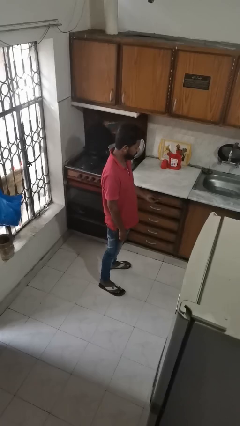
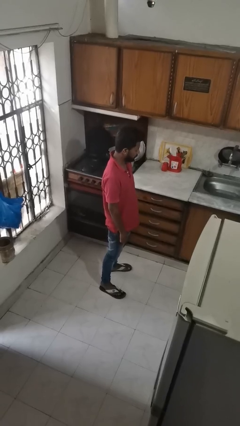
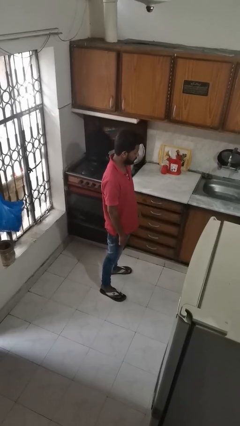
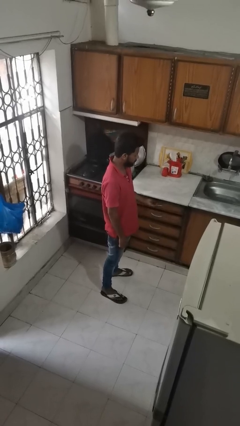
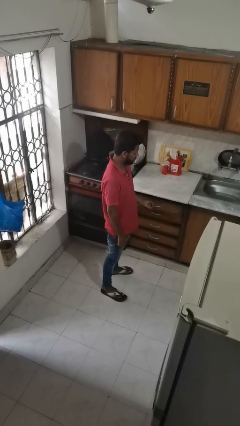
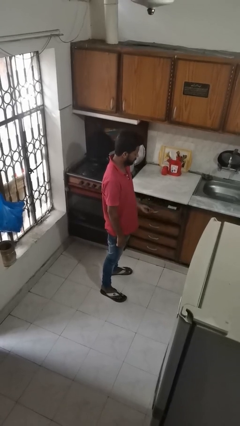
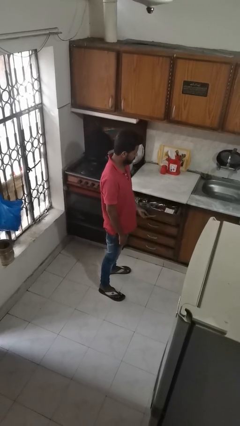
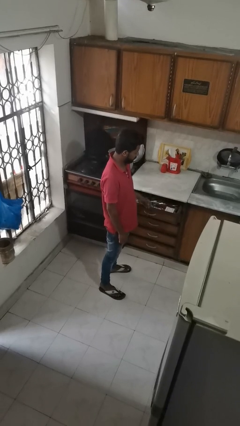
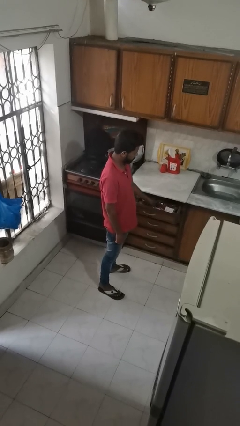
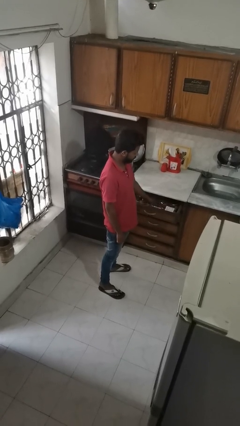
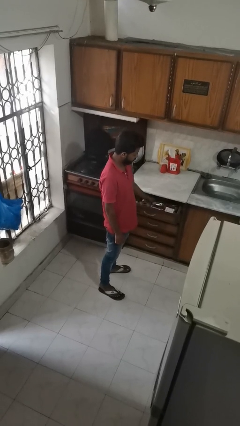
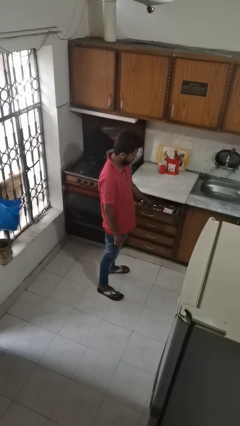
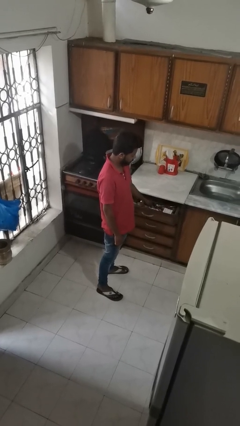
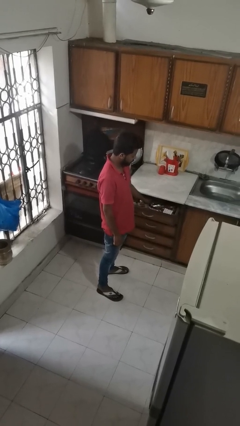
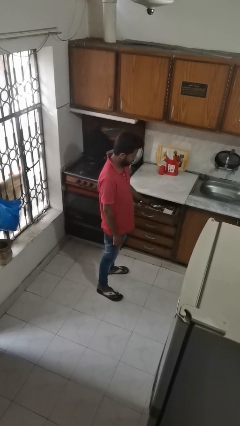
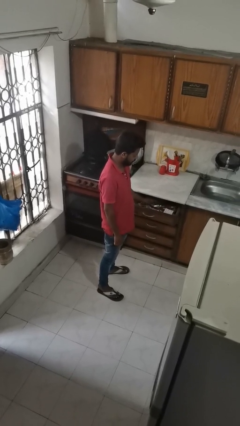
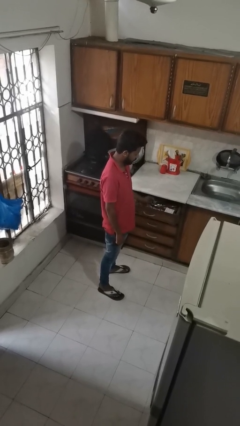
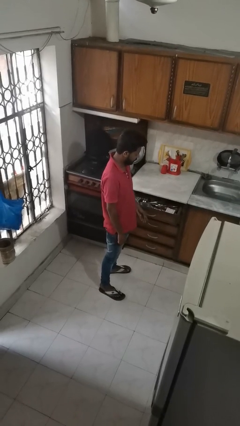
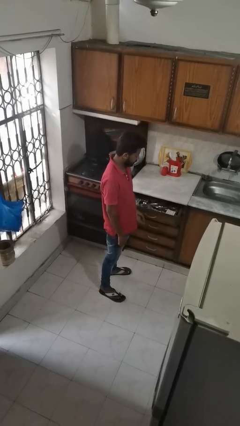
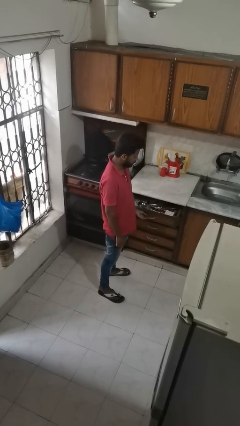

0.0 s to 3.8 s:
person searches in kitchen drawer

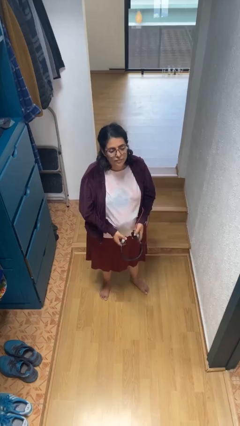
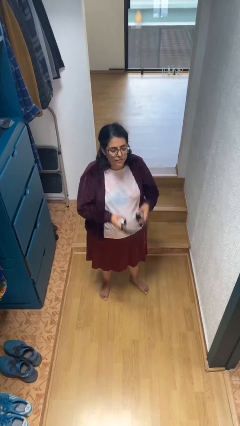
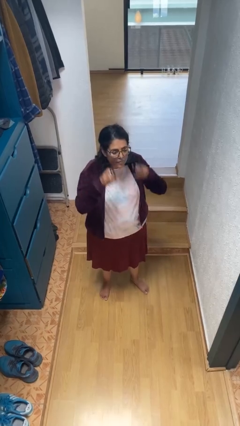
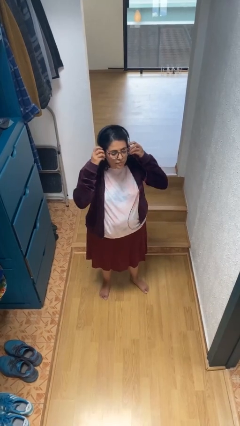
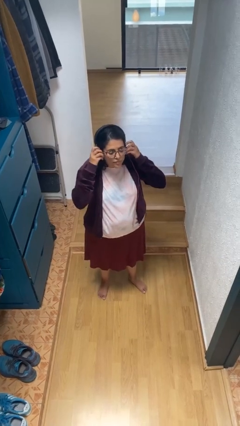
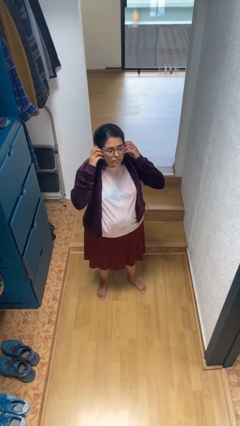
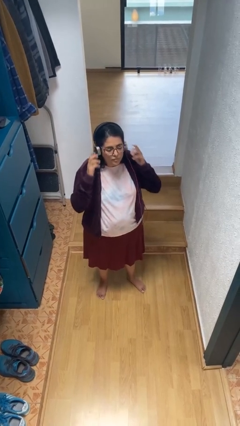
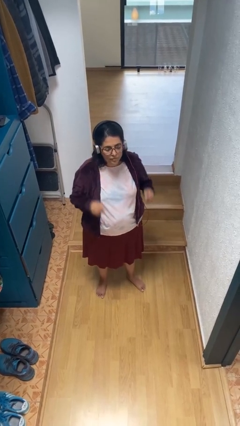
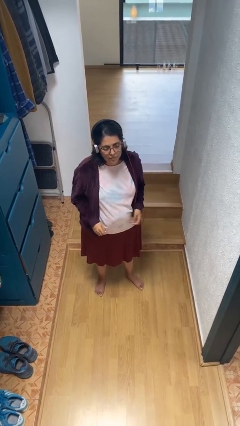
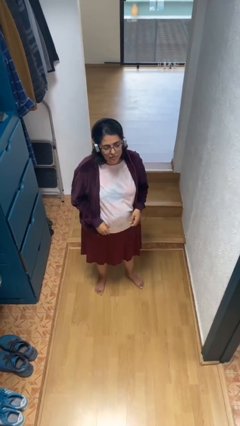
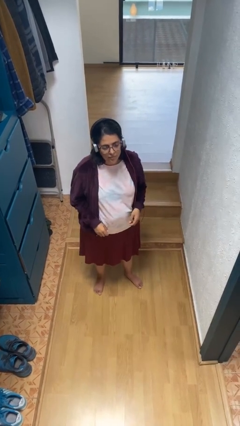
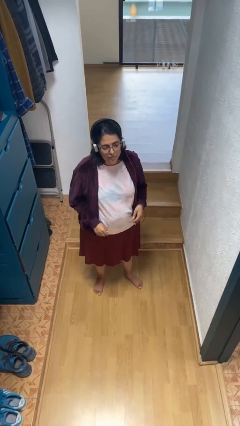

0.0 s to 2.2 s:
person puts on headphones

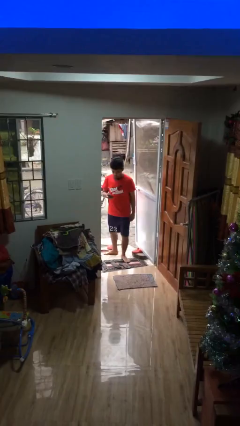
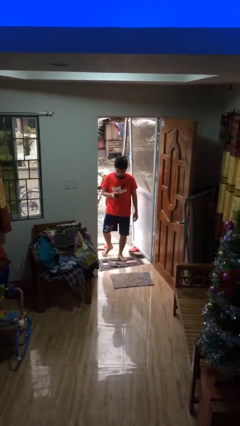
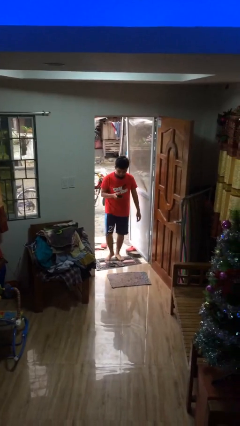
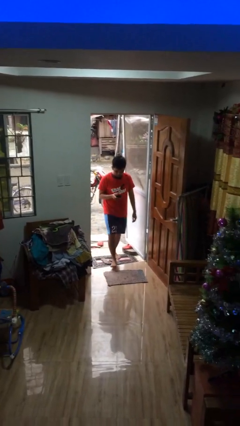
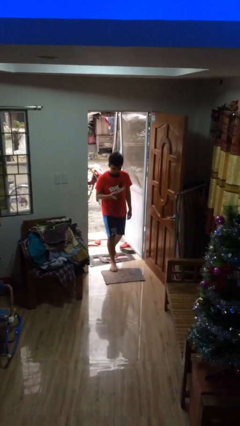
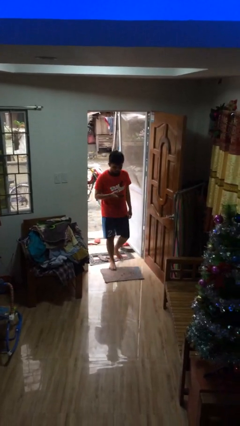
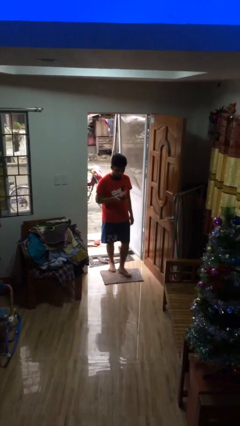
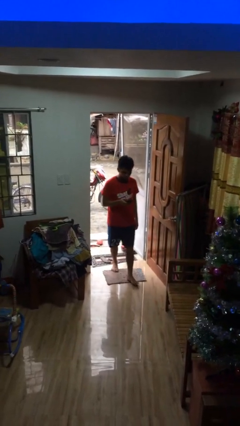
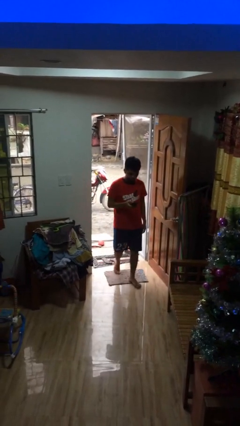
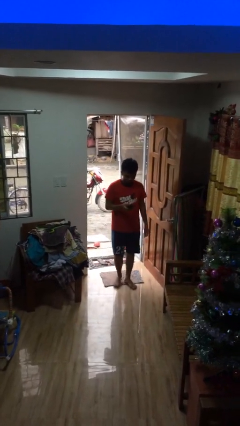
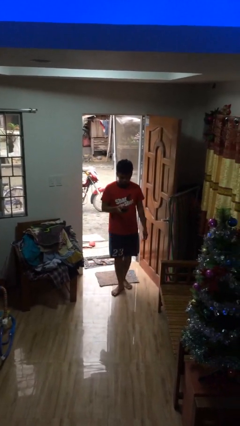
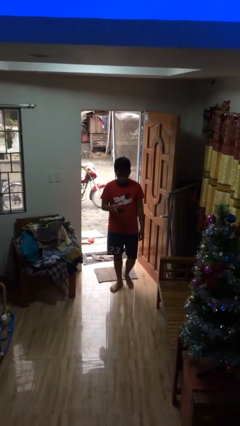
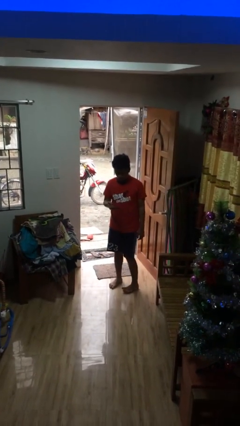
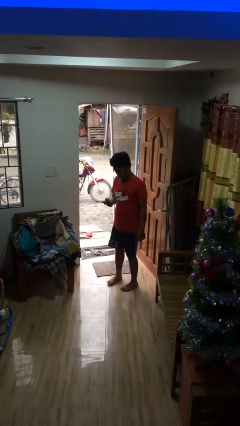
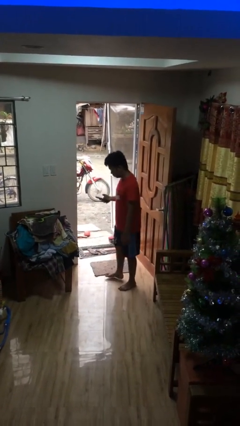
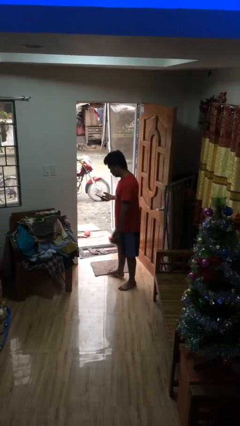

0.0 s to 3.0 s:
person enters scene through structure

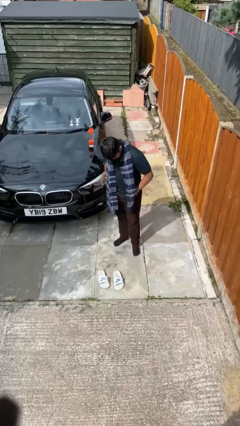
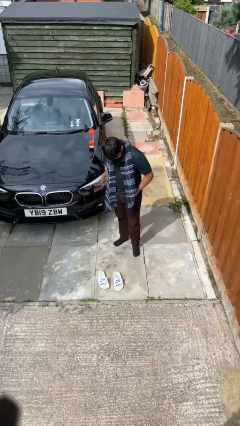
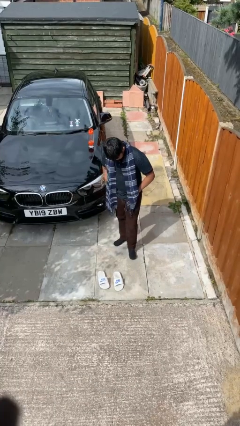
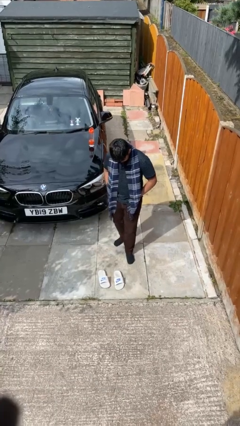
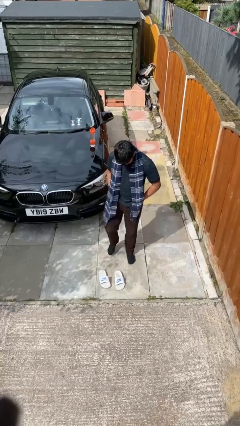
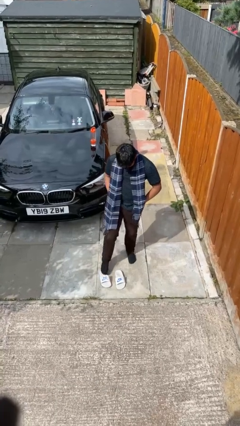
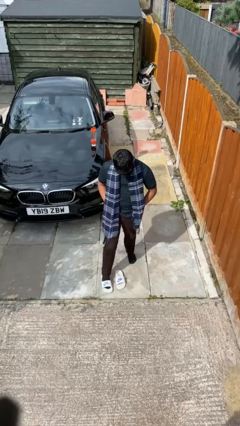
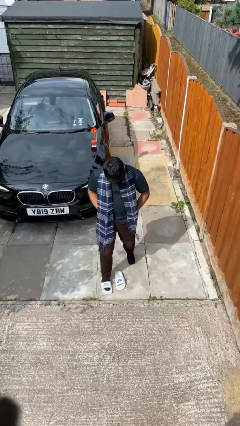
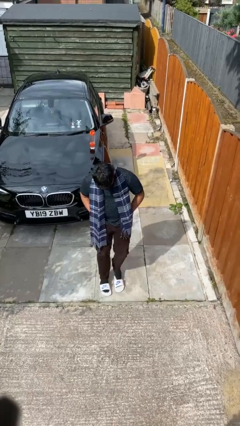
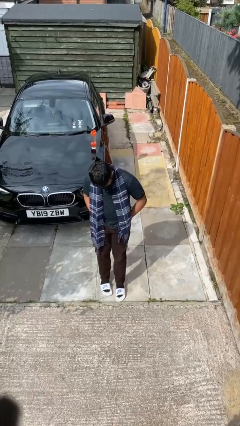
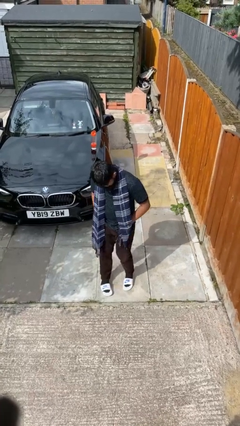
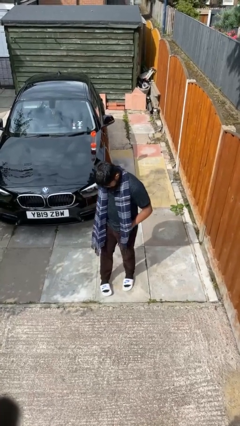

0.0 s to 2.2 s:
person puts on shoes

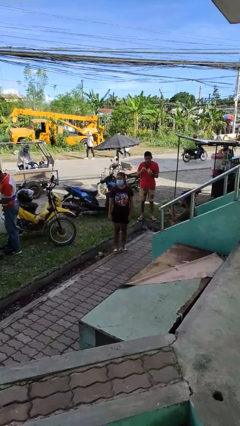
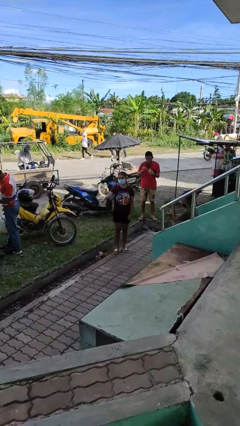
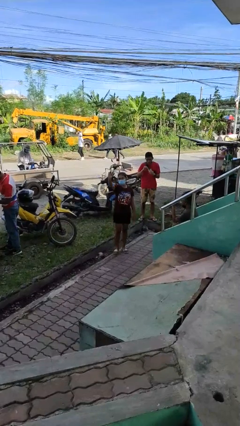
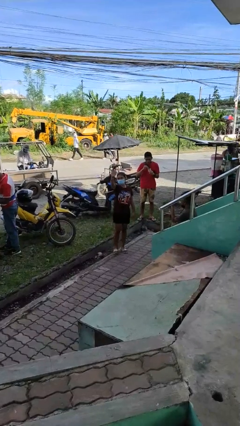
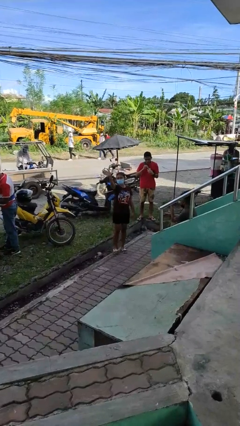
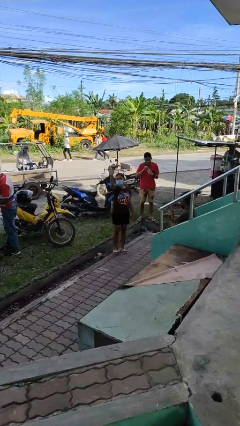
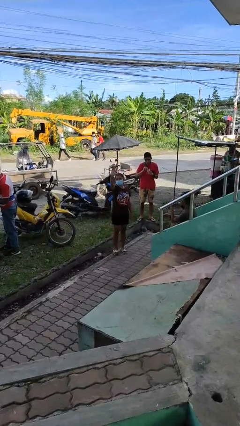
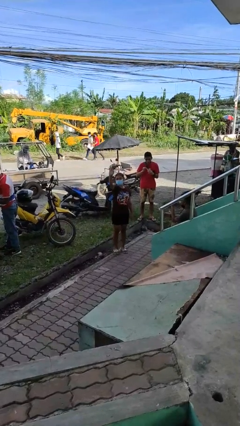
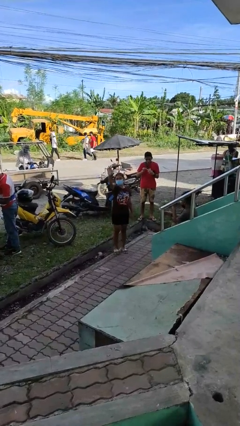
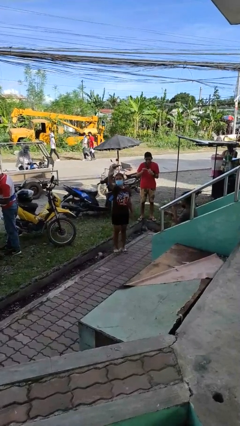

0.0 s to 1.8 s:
person waves at person

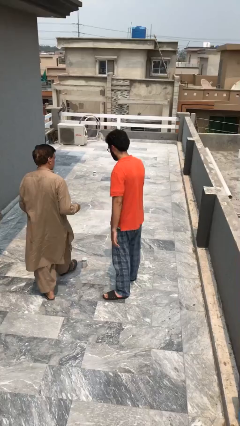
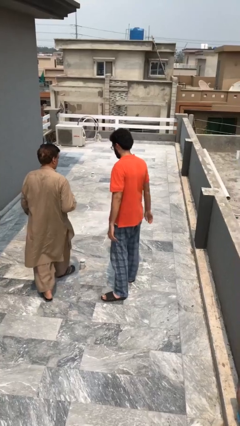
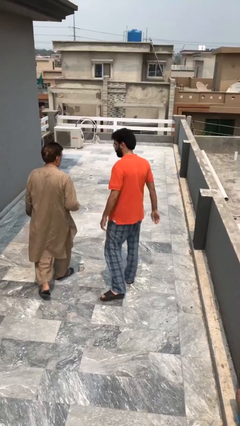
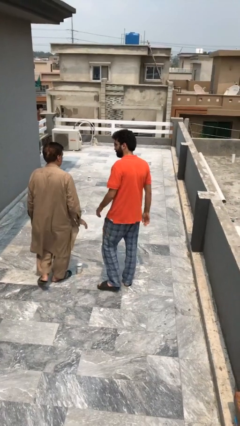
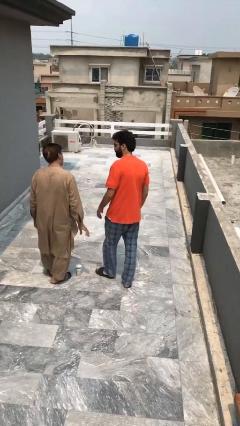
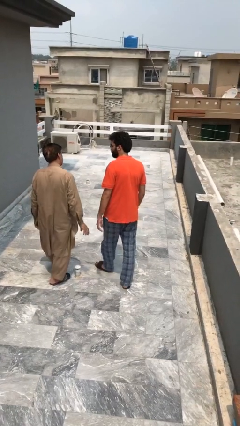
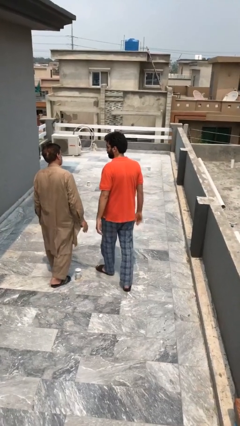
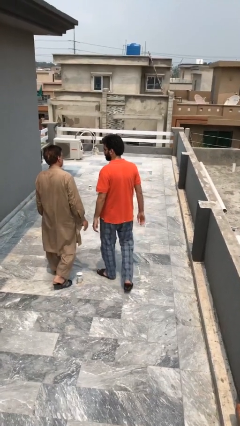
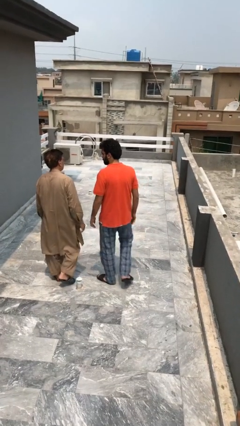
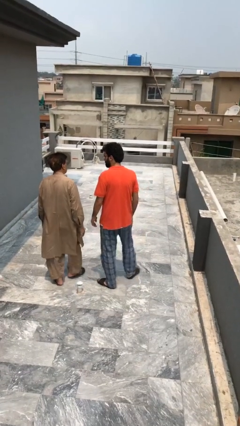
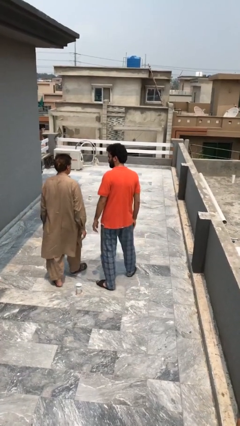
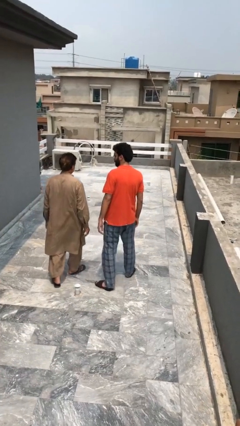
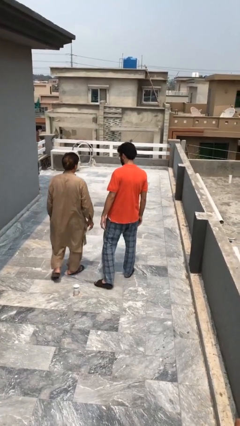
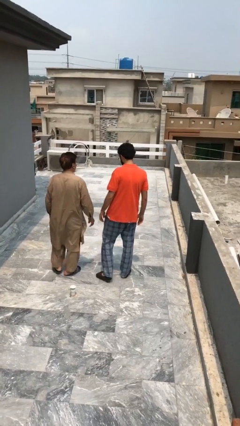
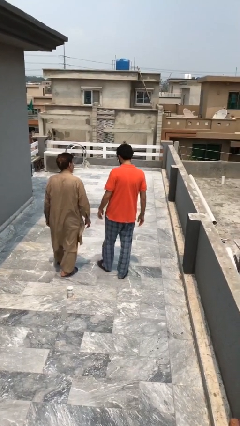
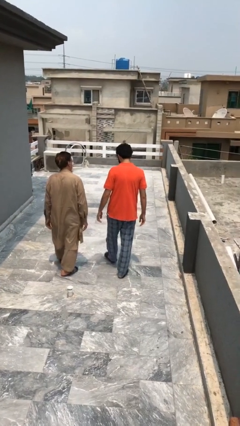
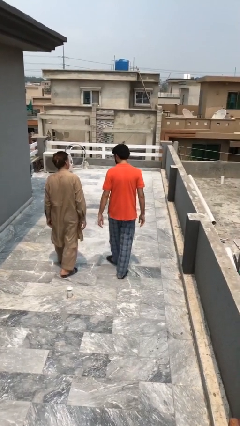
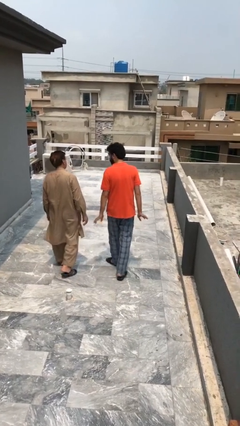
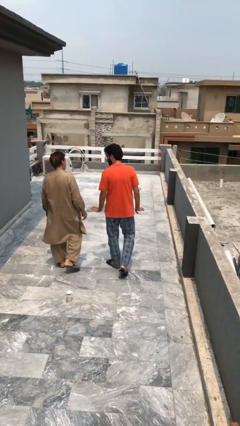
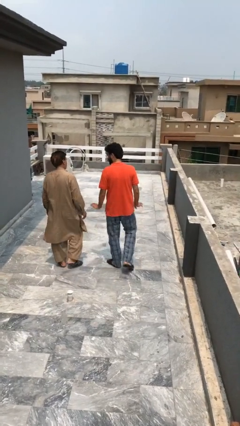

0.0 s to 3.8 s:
person talks to person

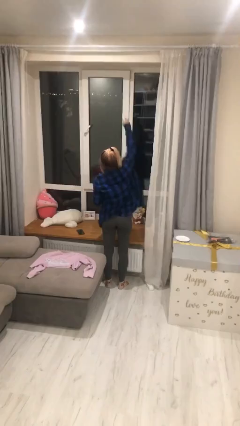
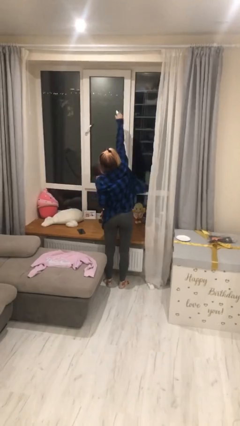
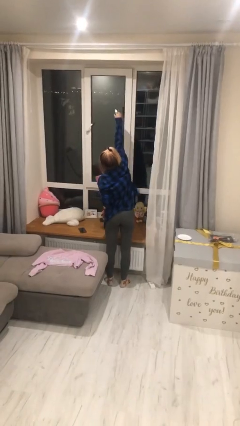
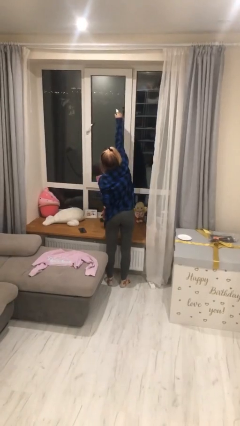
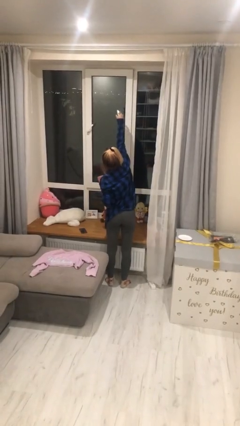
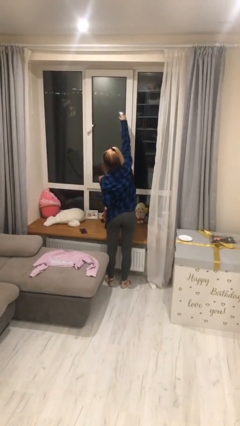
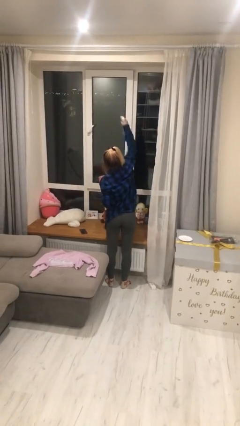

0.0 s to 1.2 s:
person sprays from bottle
